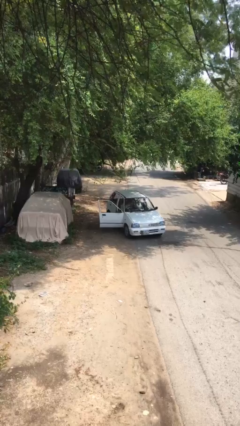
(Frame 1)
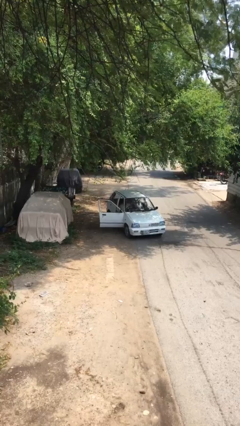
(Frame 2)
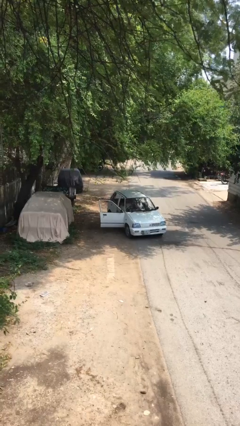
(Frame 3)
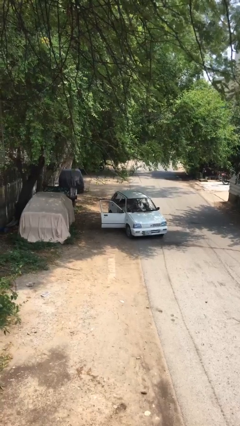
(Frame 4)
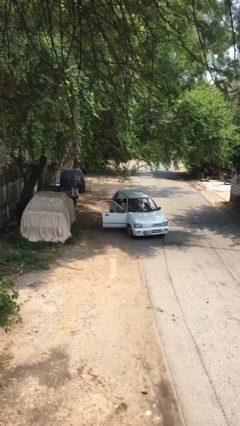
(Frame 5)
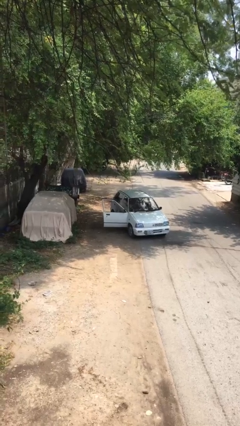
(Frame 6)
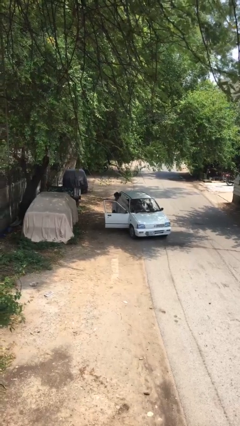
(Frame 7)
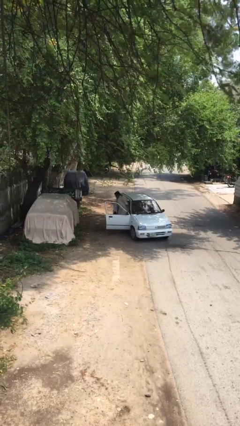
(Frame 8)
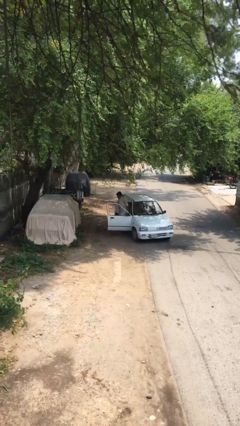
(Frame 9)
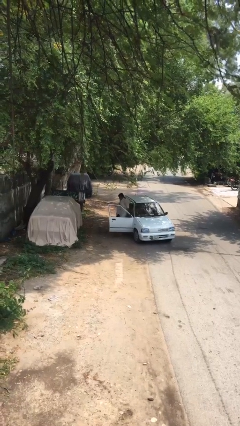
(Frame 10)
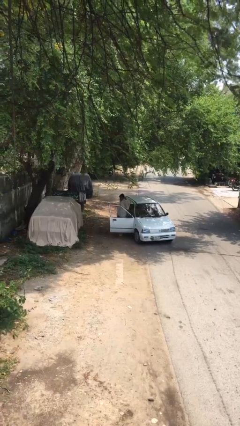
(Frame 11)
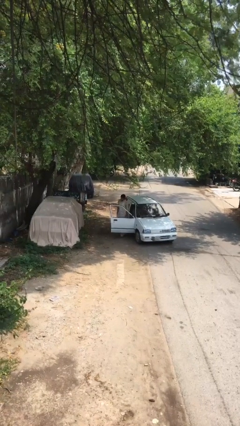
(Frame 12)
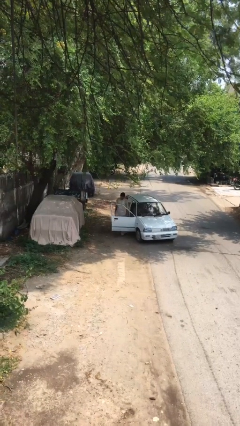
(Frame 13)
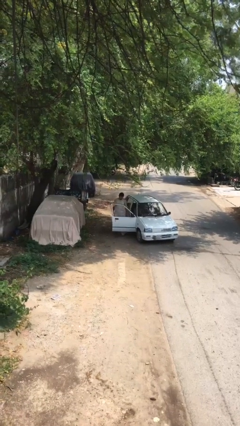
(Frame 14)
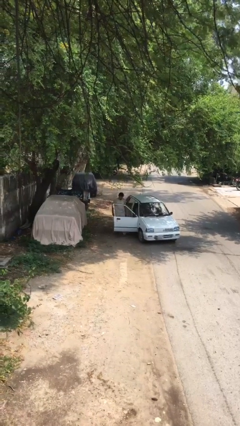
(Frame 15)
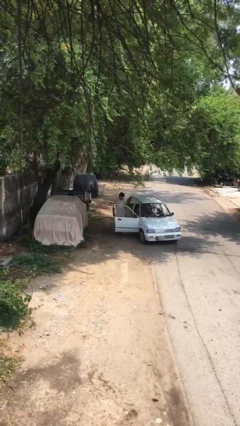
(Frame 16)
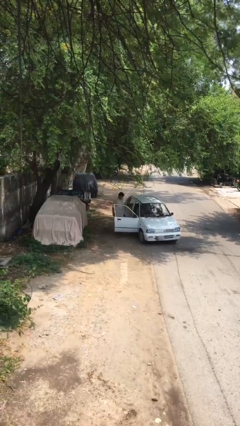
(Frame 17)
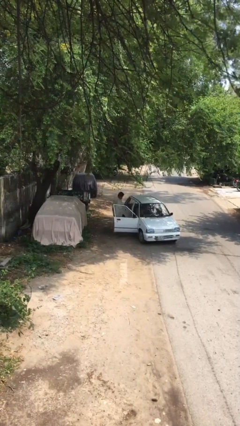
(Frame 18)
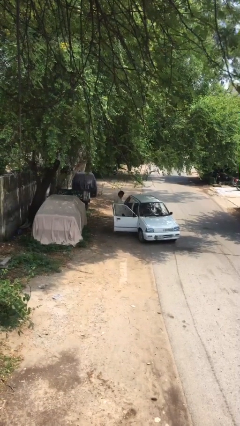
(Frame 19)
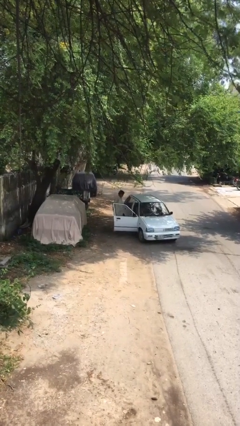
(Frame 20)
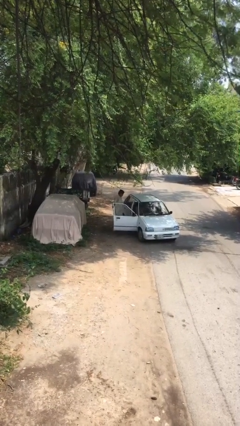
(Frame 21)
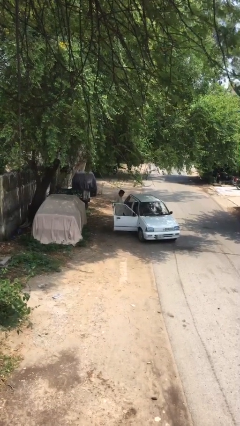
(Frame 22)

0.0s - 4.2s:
person exits car

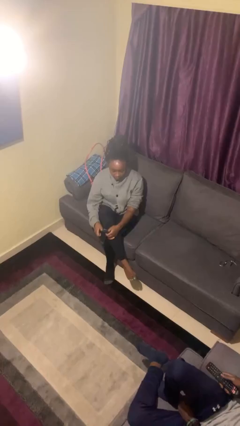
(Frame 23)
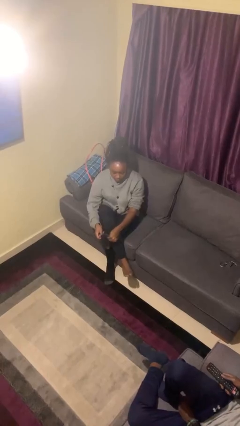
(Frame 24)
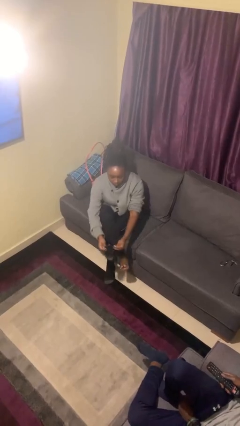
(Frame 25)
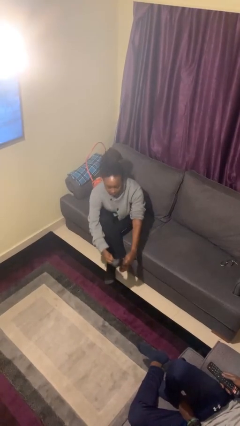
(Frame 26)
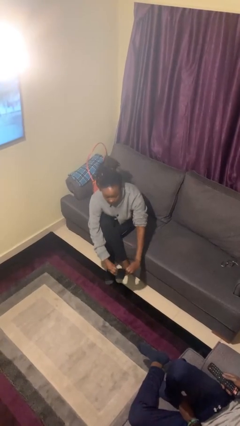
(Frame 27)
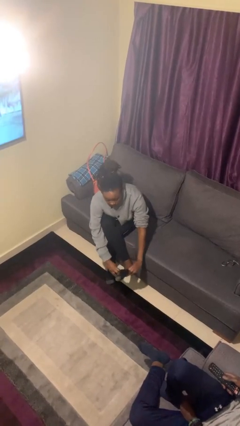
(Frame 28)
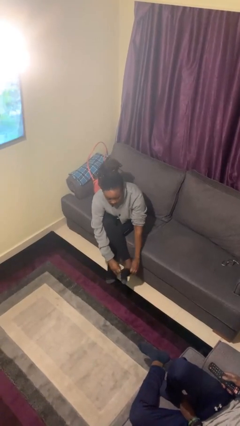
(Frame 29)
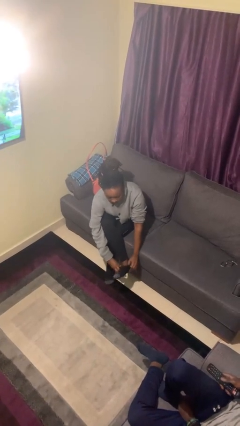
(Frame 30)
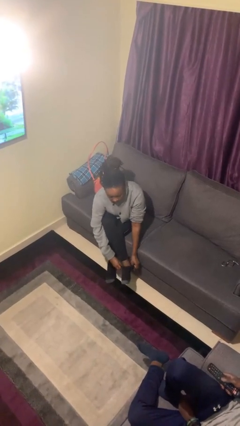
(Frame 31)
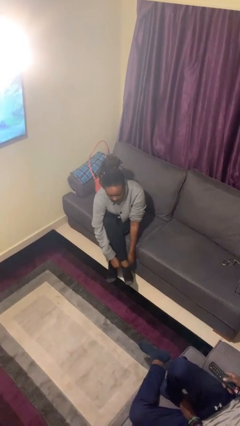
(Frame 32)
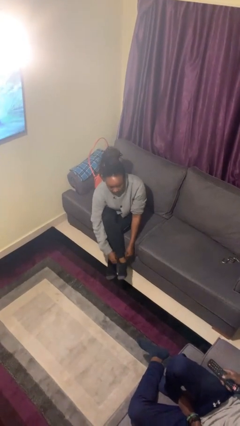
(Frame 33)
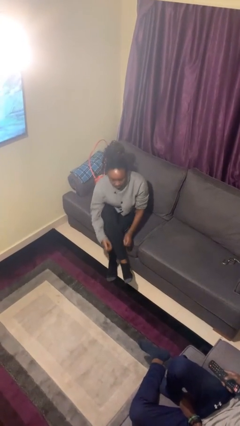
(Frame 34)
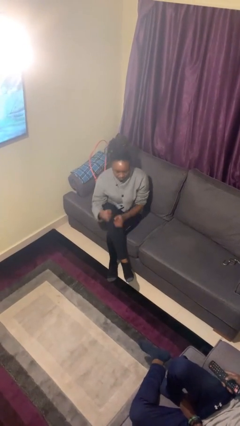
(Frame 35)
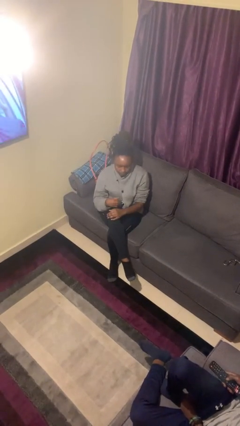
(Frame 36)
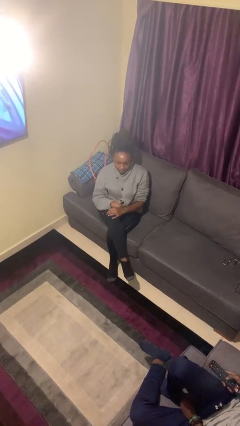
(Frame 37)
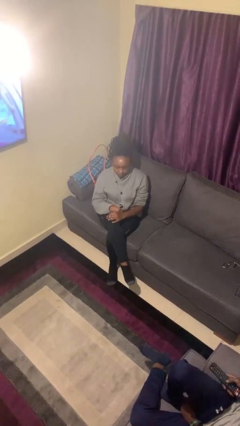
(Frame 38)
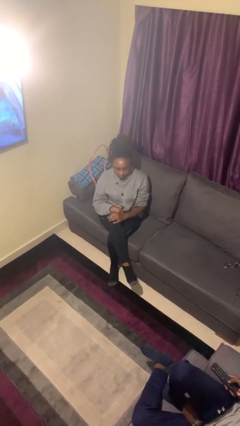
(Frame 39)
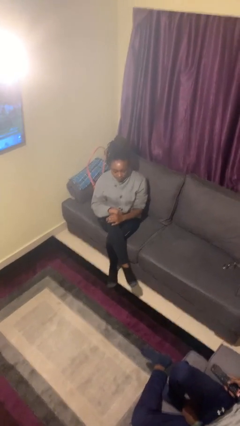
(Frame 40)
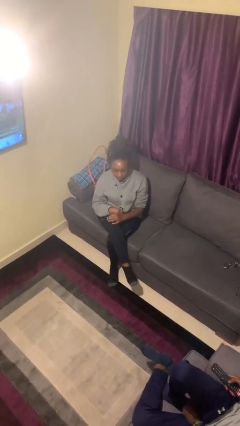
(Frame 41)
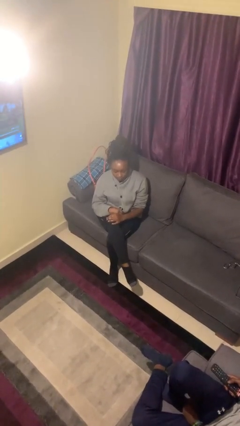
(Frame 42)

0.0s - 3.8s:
person puts on socks

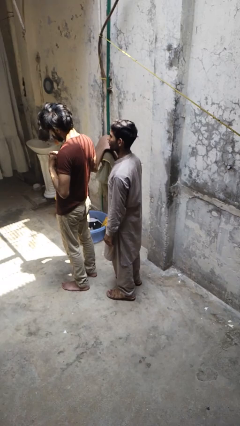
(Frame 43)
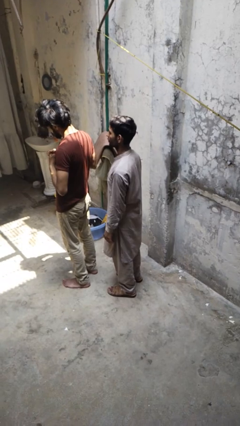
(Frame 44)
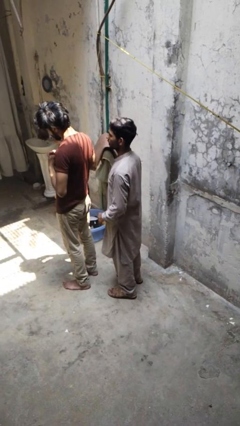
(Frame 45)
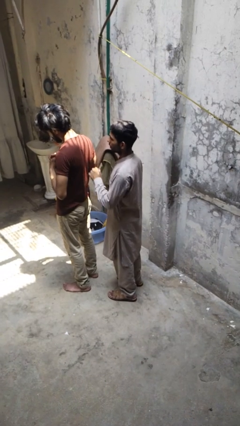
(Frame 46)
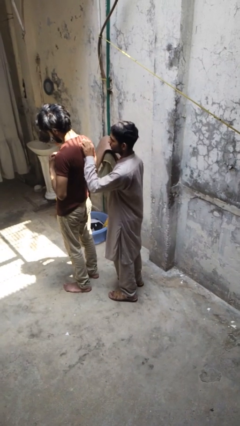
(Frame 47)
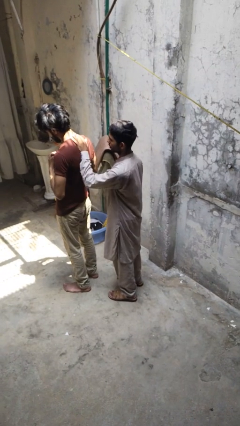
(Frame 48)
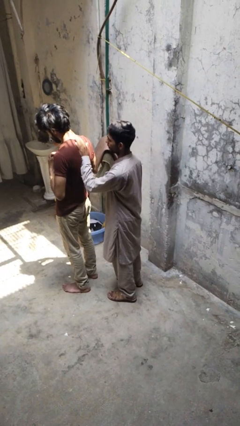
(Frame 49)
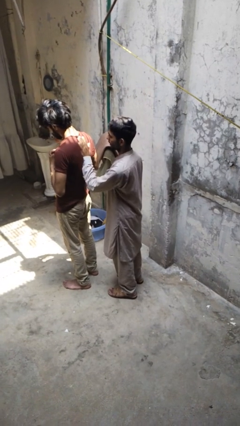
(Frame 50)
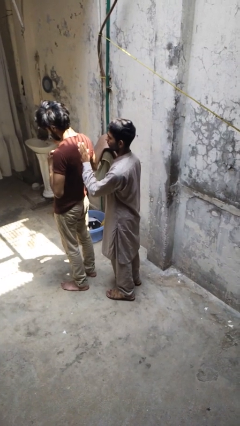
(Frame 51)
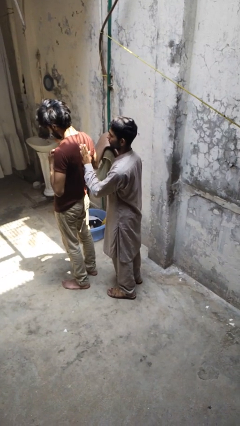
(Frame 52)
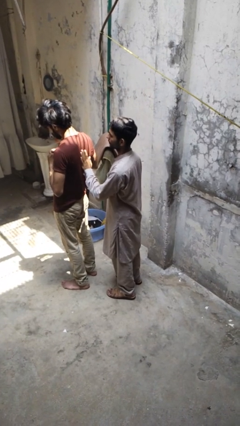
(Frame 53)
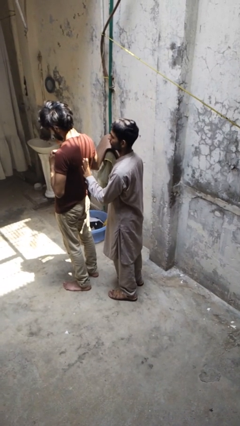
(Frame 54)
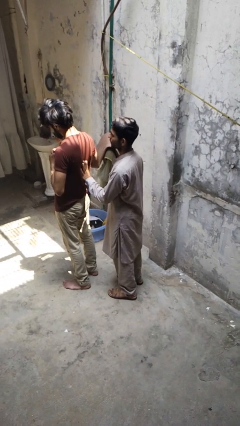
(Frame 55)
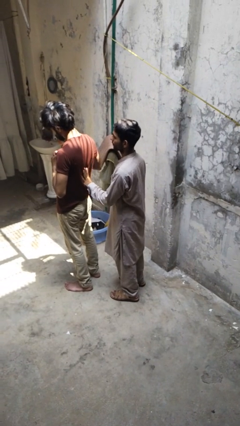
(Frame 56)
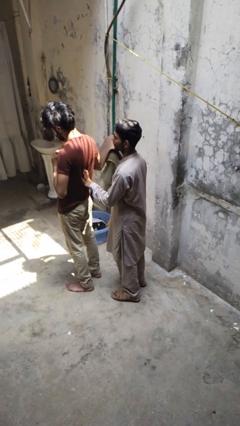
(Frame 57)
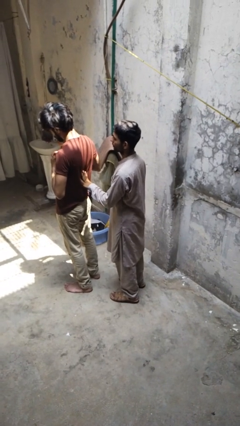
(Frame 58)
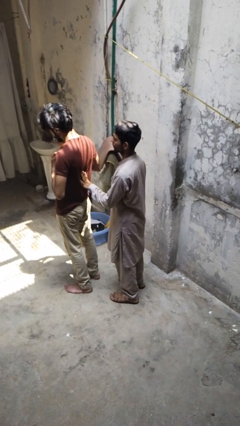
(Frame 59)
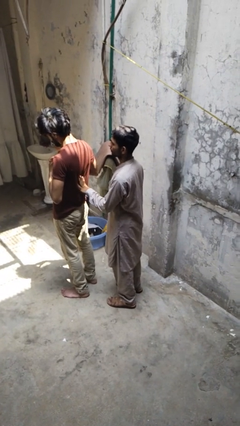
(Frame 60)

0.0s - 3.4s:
person touches back of person

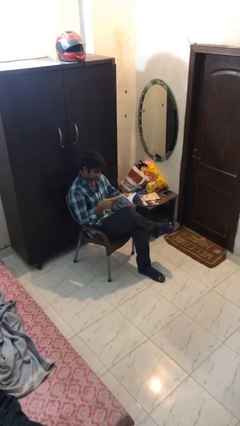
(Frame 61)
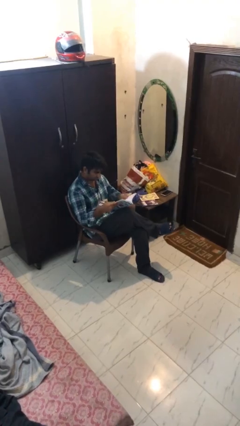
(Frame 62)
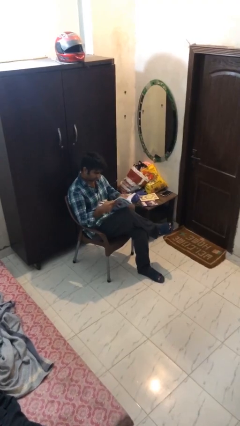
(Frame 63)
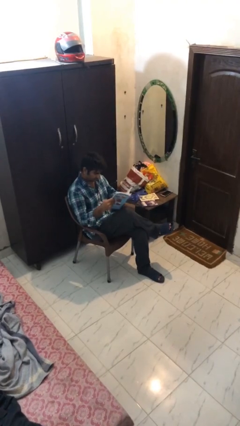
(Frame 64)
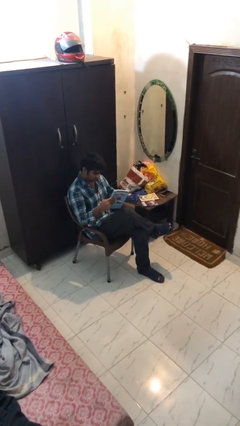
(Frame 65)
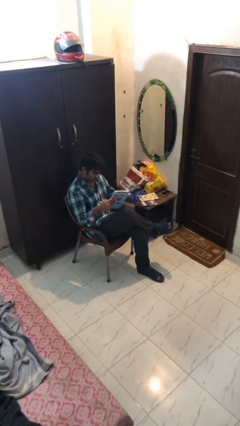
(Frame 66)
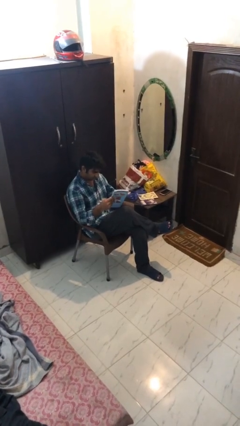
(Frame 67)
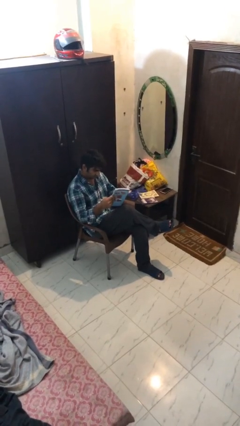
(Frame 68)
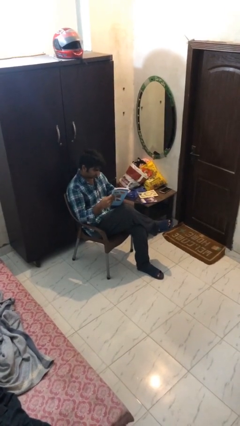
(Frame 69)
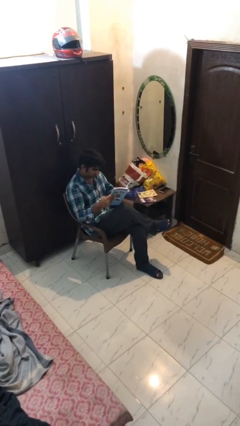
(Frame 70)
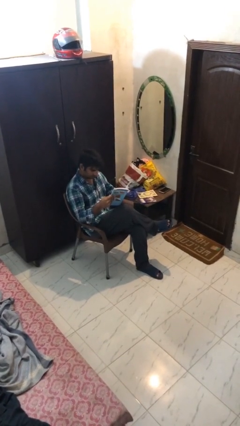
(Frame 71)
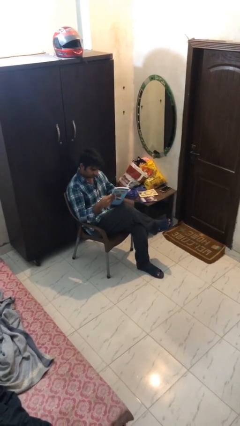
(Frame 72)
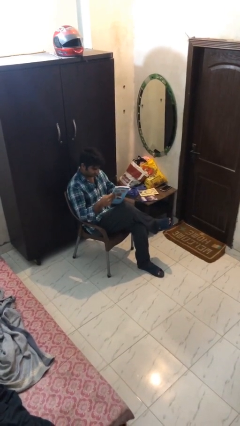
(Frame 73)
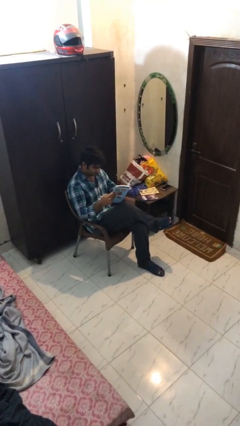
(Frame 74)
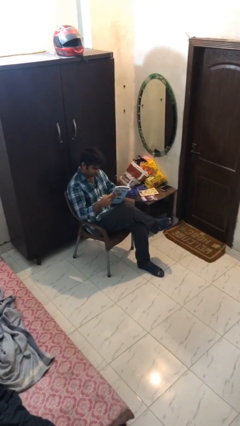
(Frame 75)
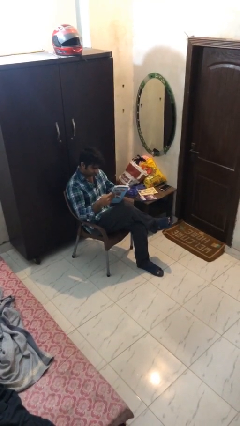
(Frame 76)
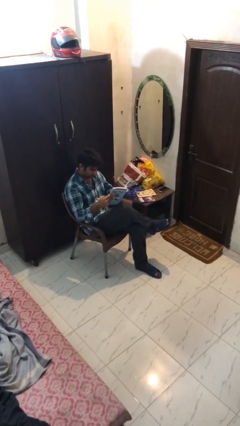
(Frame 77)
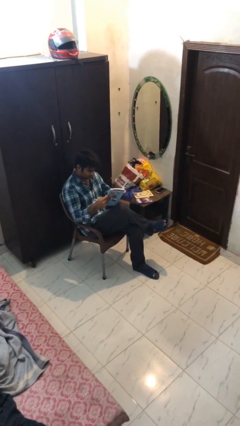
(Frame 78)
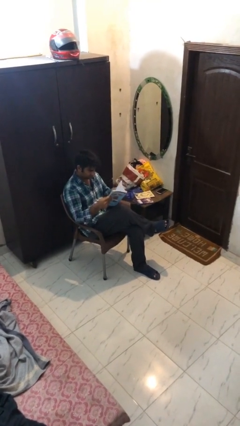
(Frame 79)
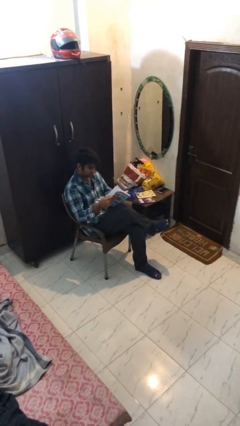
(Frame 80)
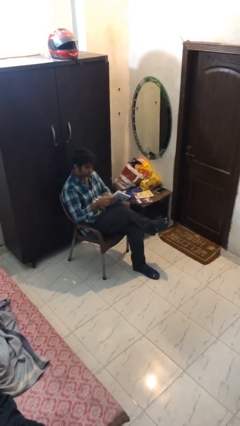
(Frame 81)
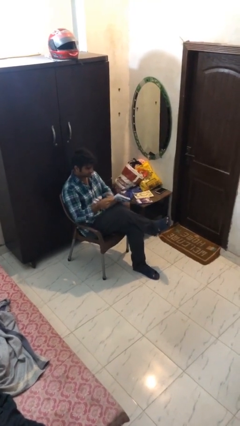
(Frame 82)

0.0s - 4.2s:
person reads document

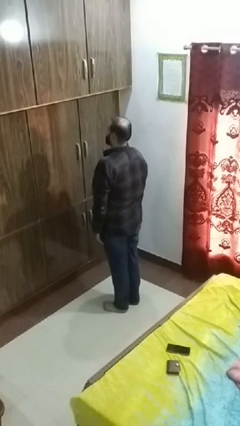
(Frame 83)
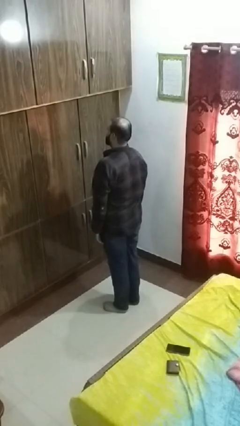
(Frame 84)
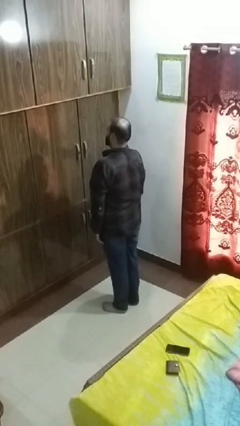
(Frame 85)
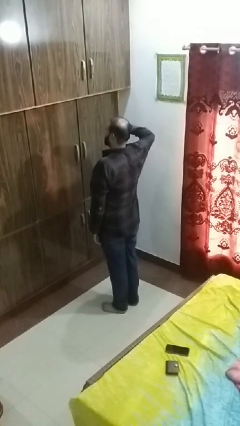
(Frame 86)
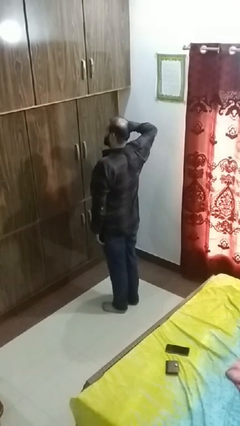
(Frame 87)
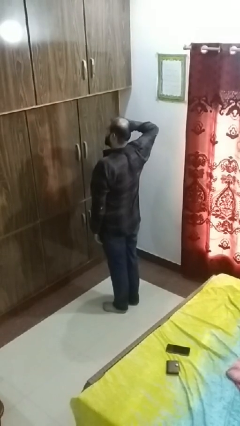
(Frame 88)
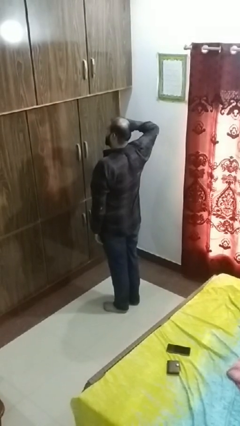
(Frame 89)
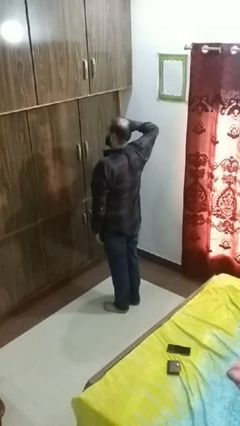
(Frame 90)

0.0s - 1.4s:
person salutes

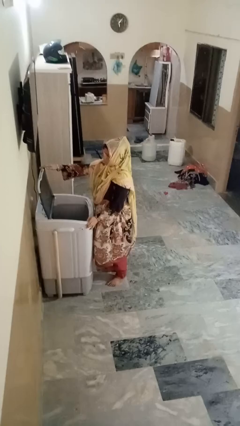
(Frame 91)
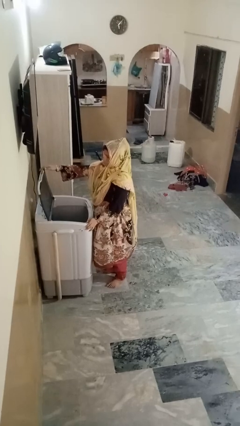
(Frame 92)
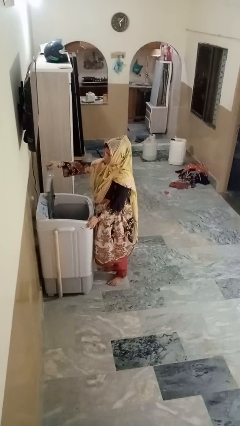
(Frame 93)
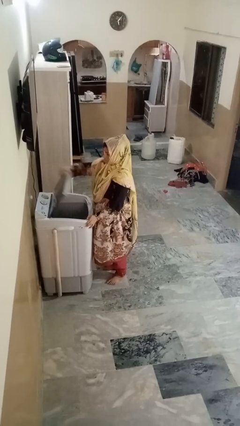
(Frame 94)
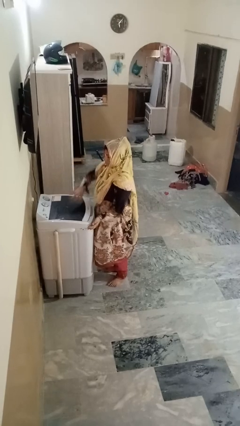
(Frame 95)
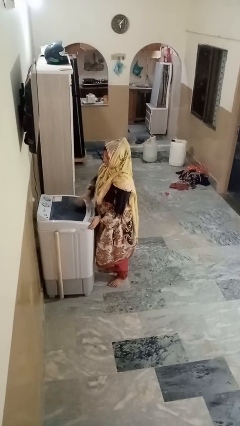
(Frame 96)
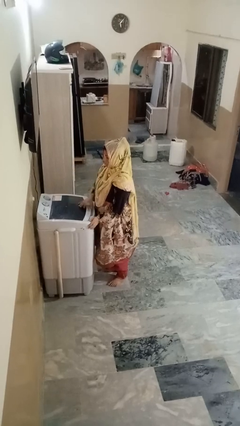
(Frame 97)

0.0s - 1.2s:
person closes clothes washer
